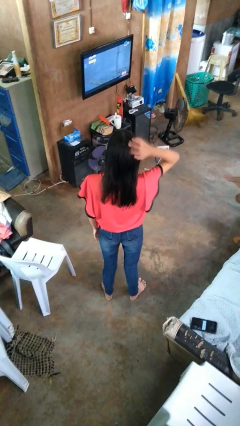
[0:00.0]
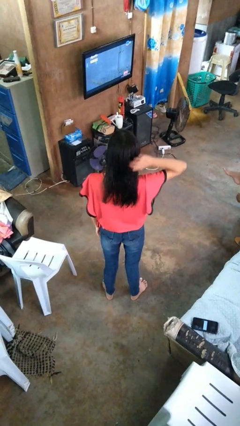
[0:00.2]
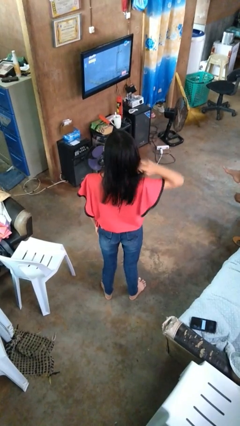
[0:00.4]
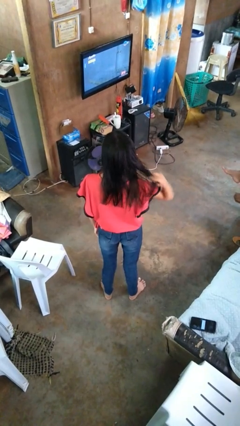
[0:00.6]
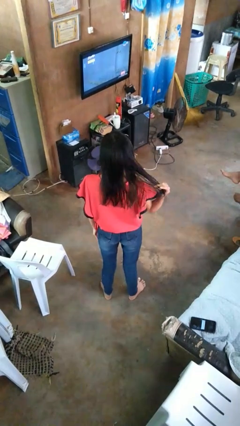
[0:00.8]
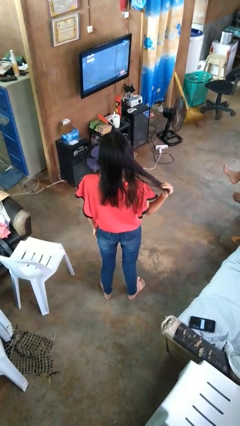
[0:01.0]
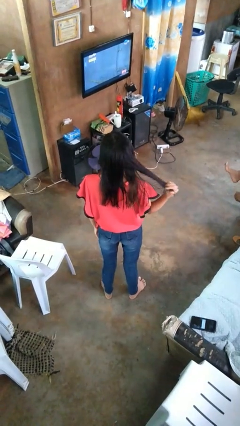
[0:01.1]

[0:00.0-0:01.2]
person strokes hair

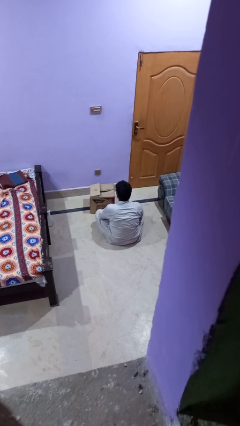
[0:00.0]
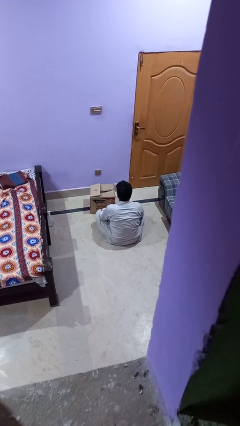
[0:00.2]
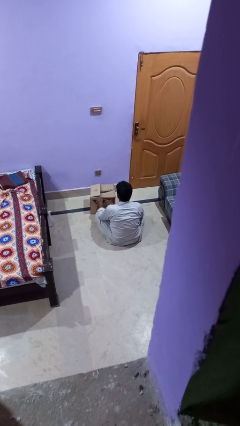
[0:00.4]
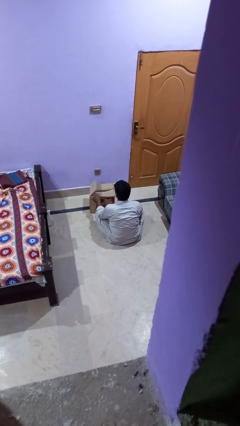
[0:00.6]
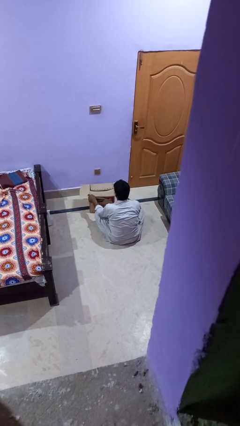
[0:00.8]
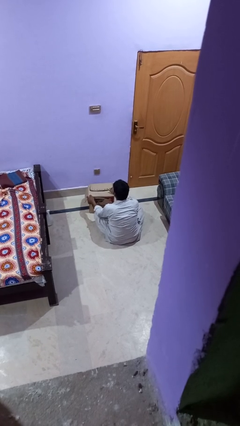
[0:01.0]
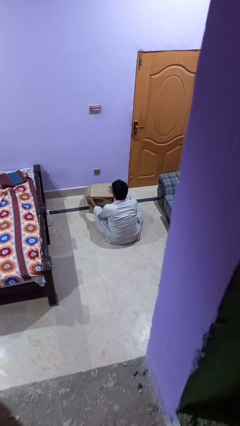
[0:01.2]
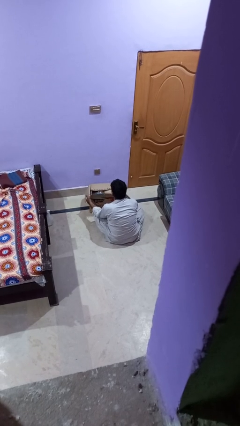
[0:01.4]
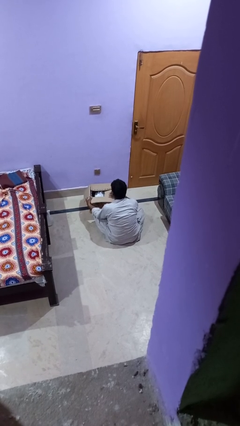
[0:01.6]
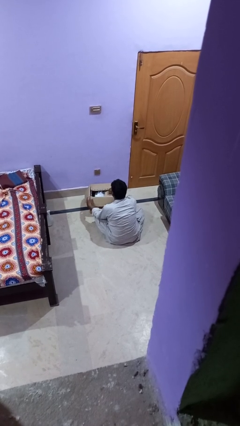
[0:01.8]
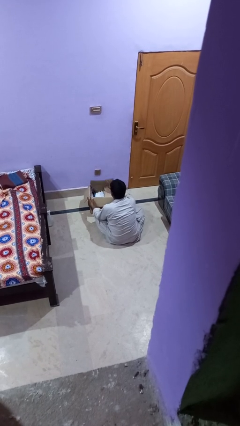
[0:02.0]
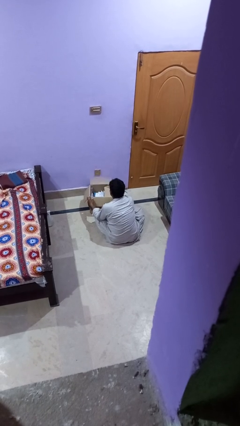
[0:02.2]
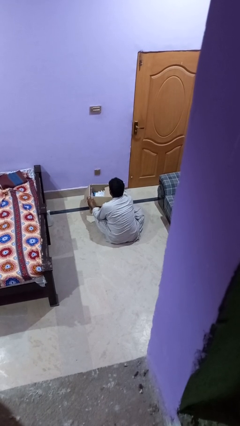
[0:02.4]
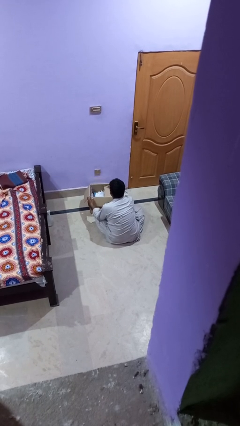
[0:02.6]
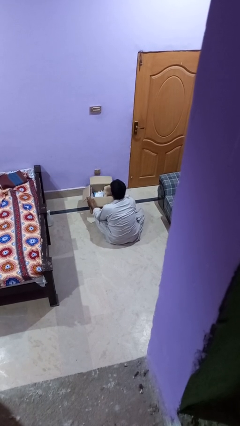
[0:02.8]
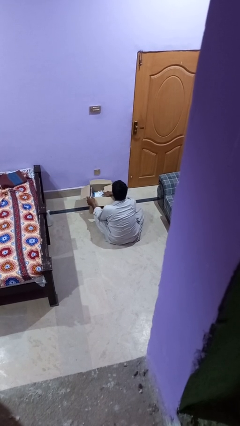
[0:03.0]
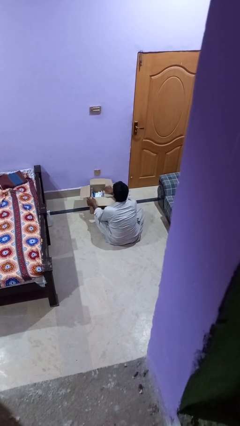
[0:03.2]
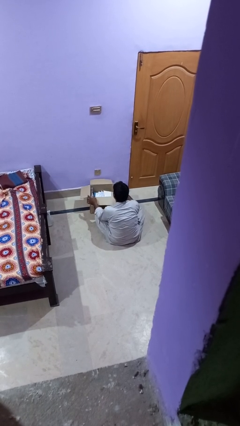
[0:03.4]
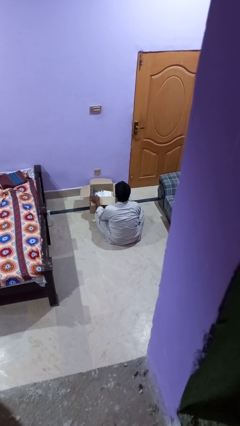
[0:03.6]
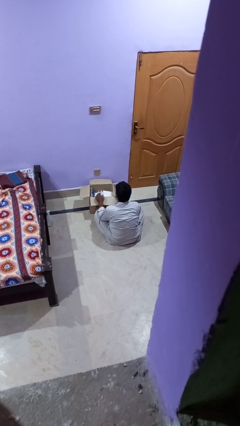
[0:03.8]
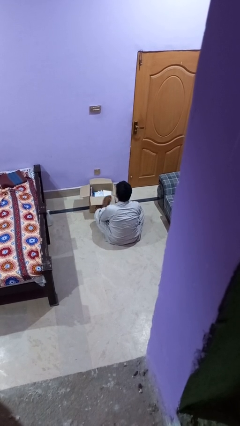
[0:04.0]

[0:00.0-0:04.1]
person opens box

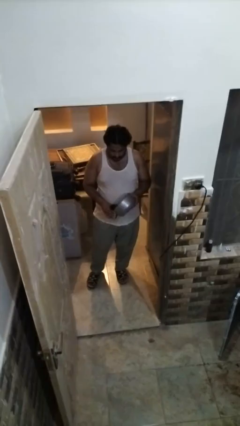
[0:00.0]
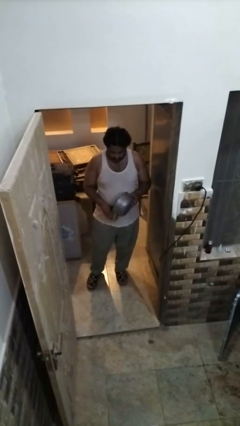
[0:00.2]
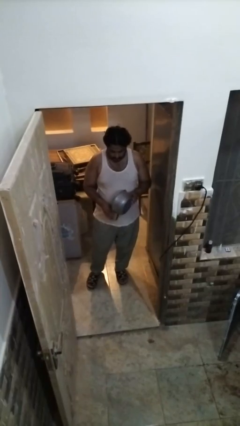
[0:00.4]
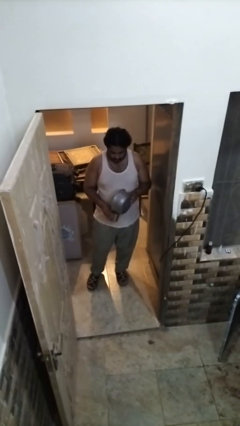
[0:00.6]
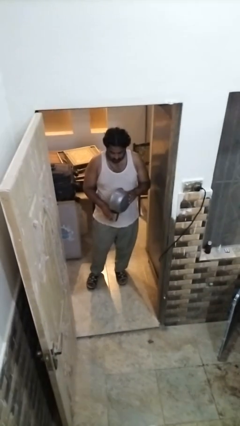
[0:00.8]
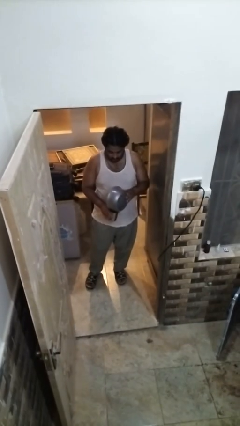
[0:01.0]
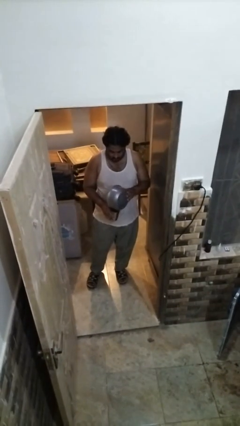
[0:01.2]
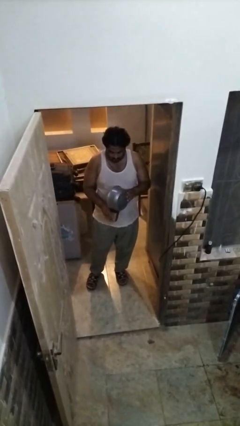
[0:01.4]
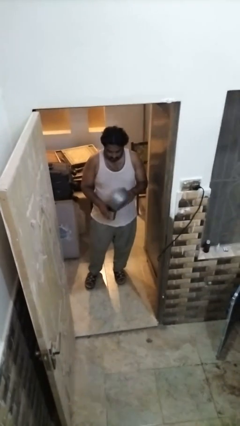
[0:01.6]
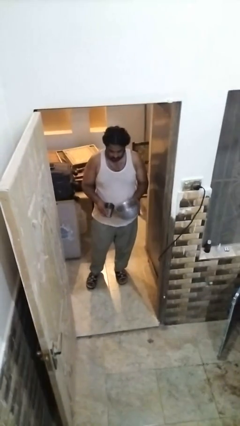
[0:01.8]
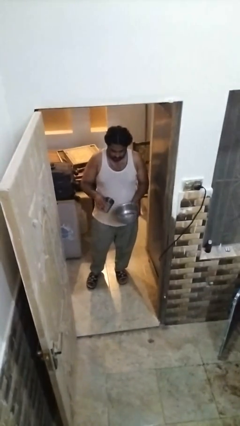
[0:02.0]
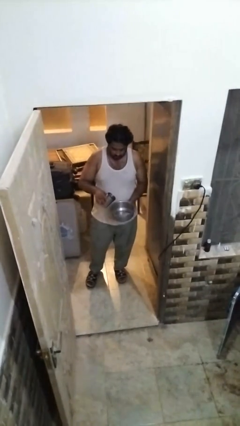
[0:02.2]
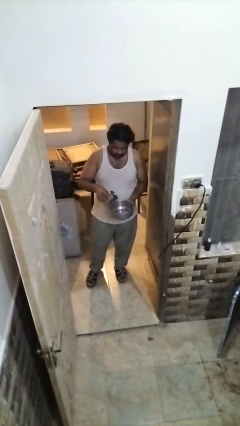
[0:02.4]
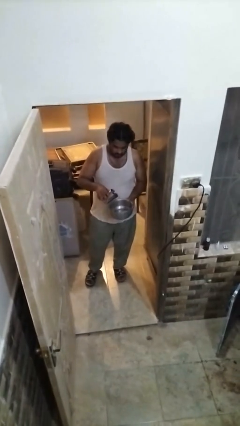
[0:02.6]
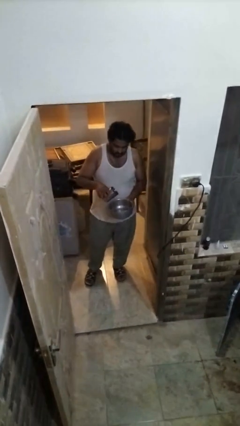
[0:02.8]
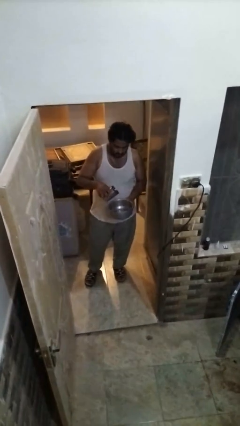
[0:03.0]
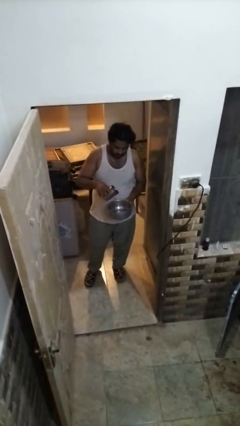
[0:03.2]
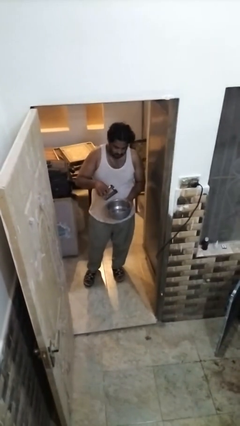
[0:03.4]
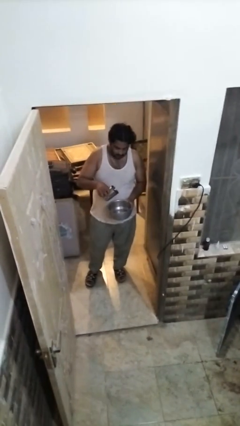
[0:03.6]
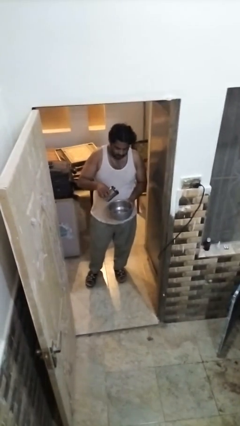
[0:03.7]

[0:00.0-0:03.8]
person pours into bowl

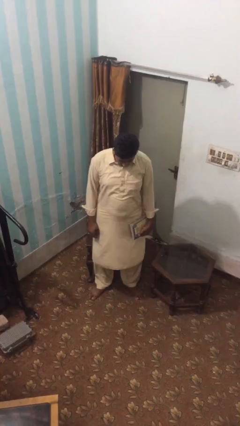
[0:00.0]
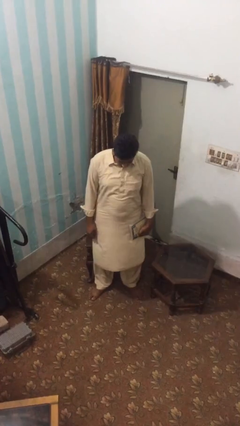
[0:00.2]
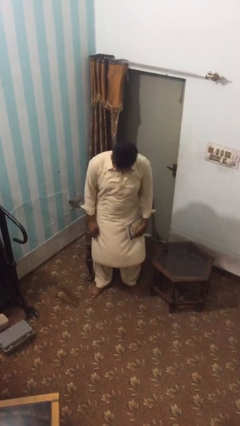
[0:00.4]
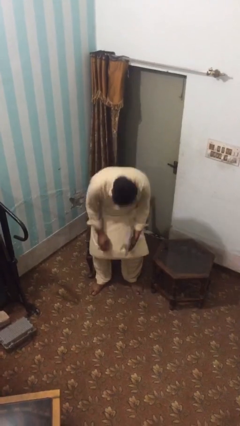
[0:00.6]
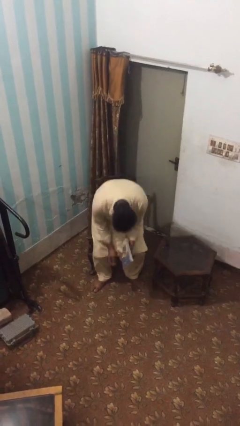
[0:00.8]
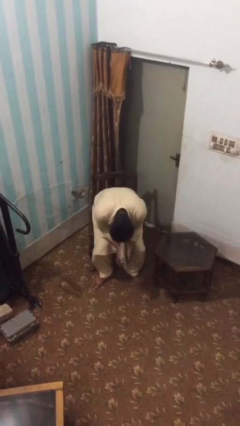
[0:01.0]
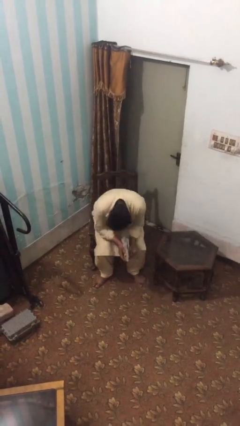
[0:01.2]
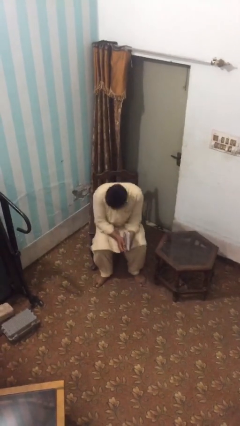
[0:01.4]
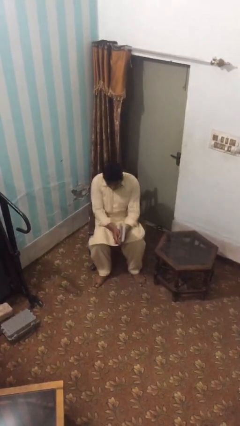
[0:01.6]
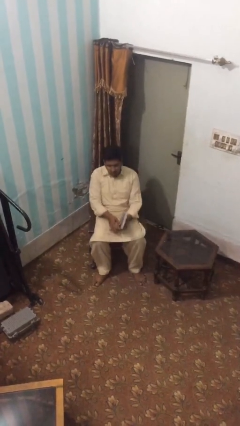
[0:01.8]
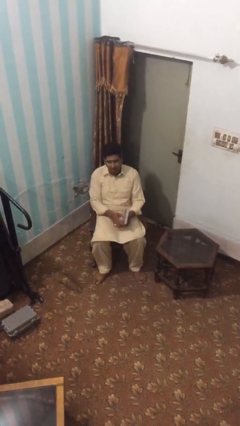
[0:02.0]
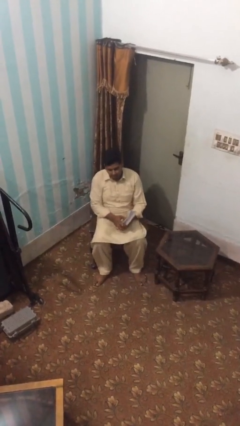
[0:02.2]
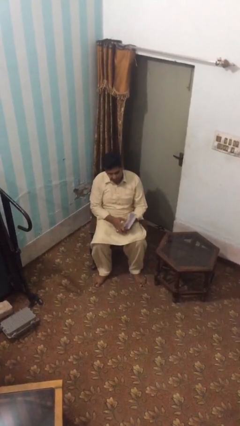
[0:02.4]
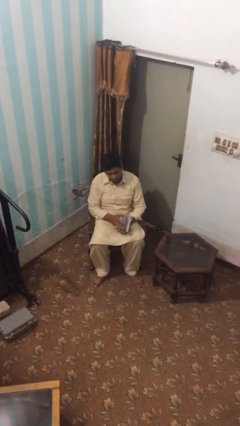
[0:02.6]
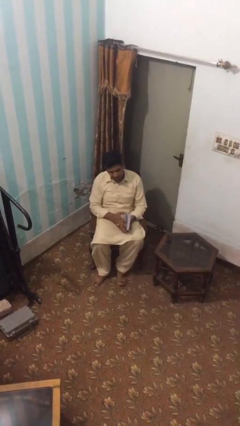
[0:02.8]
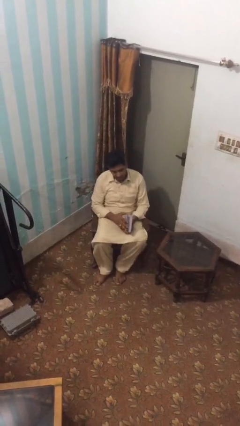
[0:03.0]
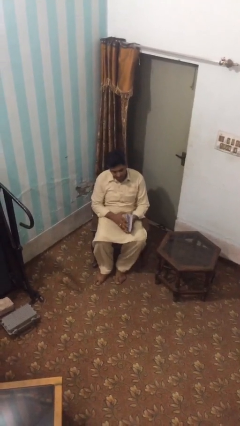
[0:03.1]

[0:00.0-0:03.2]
person sits down

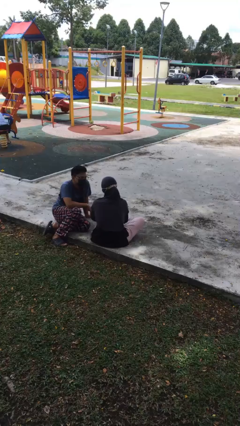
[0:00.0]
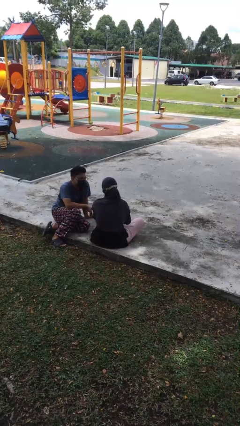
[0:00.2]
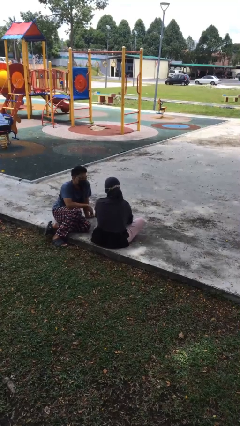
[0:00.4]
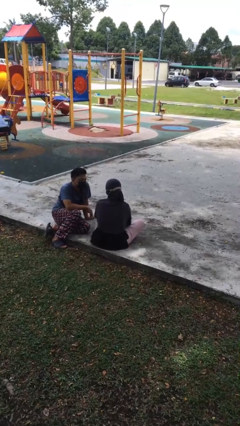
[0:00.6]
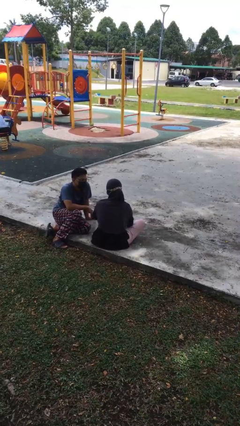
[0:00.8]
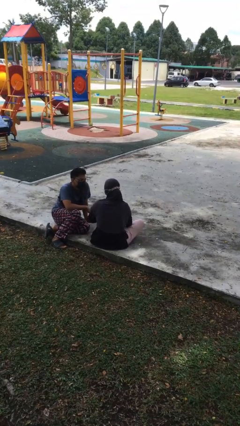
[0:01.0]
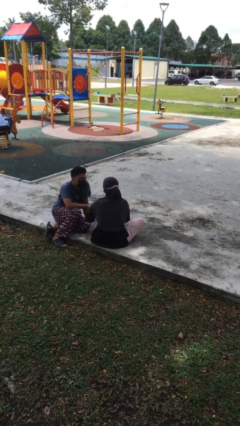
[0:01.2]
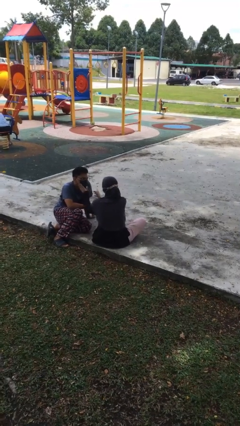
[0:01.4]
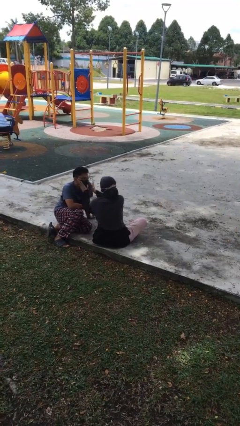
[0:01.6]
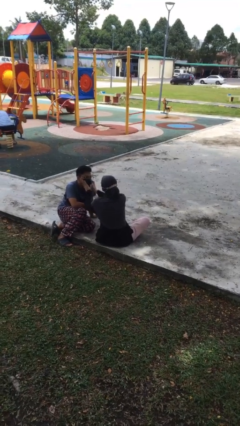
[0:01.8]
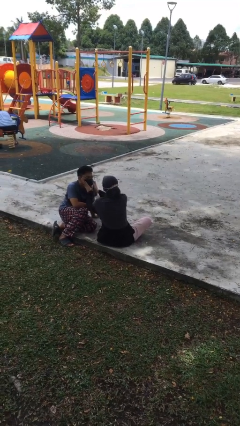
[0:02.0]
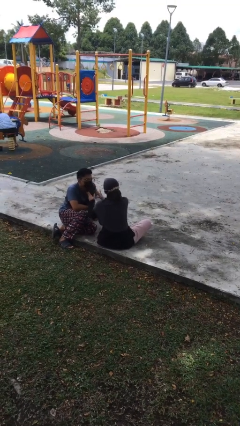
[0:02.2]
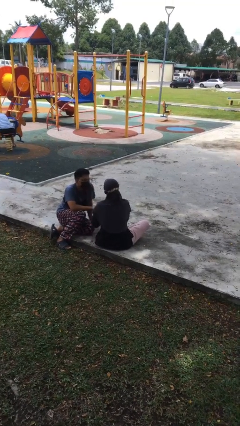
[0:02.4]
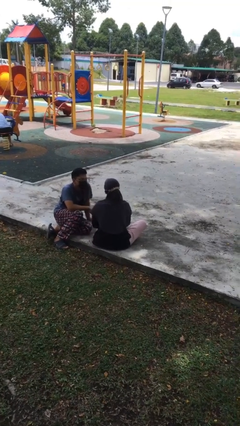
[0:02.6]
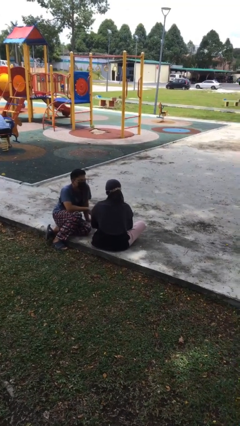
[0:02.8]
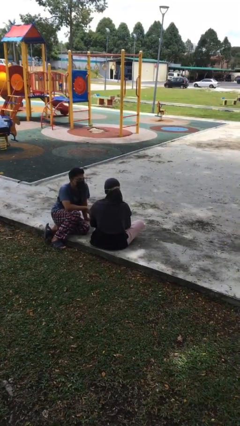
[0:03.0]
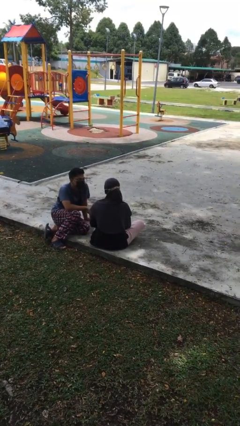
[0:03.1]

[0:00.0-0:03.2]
person touches face of person

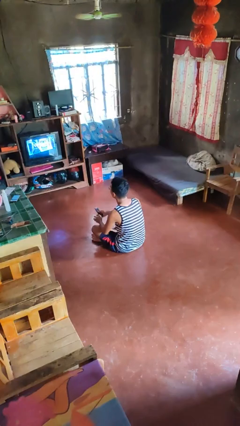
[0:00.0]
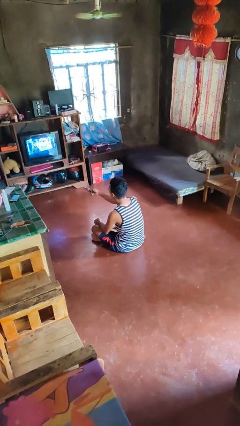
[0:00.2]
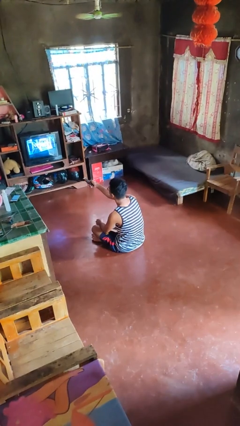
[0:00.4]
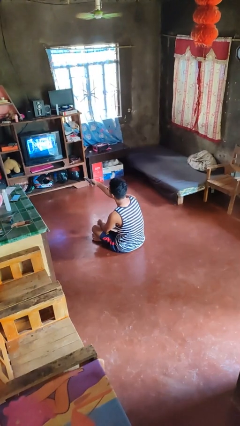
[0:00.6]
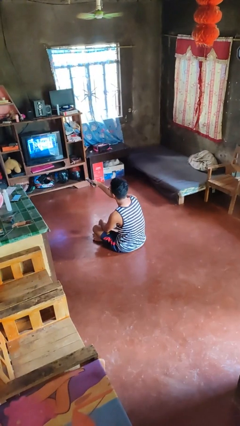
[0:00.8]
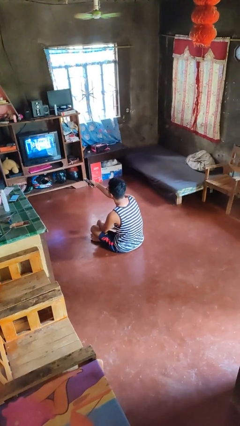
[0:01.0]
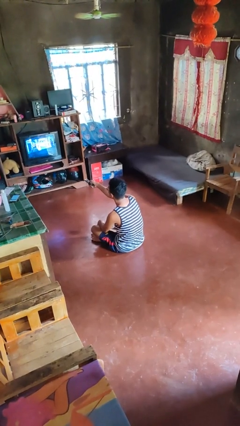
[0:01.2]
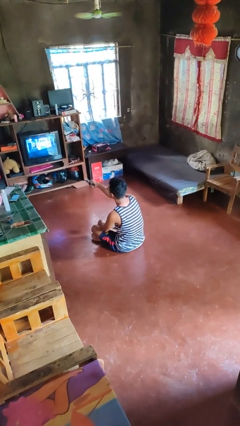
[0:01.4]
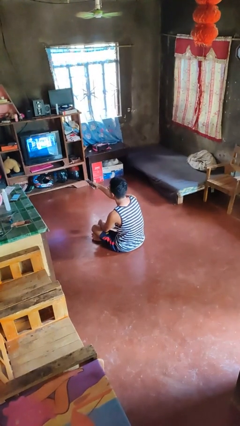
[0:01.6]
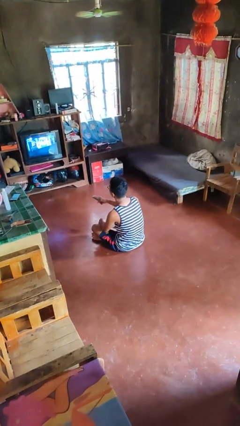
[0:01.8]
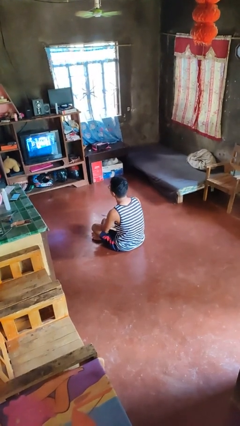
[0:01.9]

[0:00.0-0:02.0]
person uses television remote
